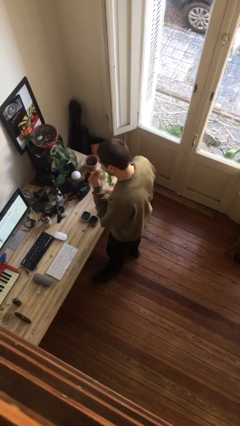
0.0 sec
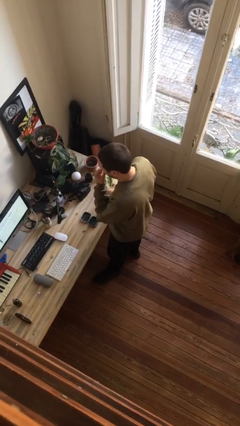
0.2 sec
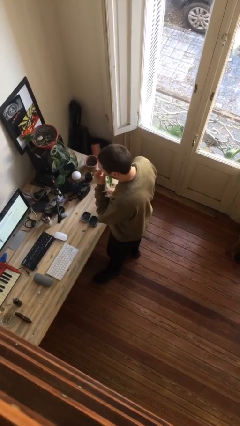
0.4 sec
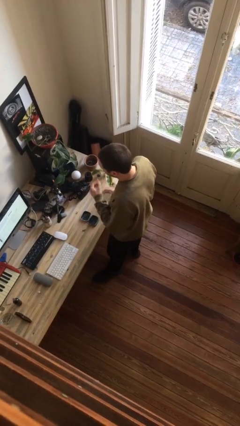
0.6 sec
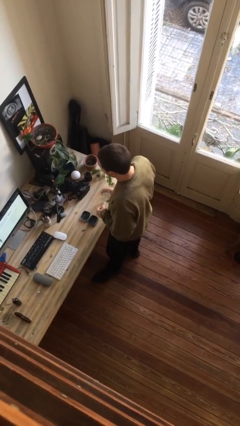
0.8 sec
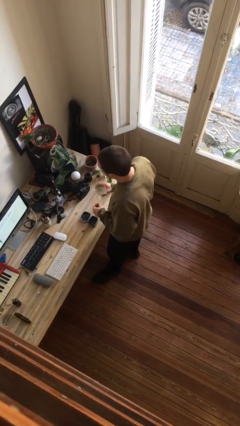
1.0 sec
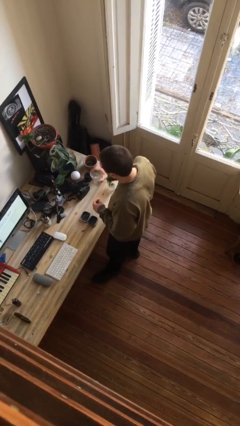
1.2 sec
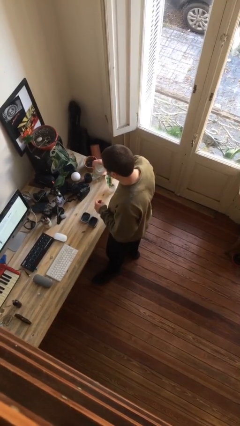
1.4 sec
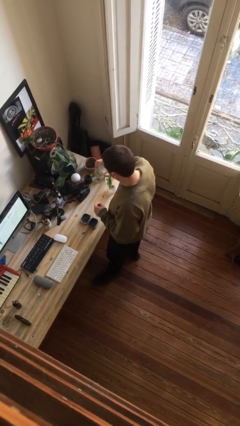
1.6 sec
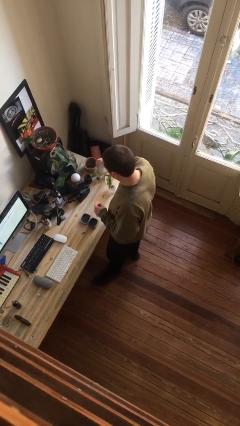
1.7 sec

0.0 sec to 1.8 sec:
person takes medicine pills

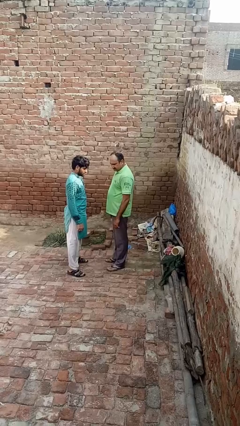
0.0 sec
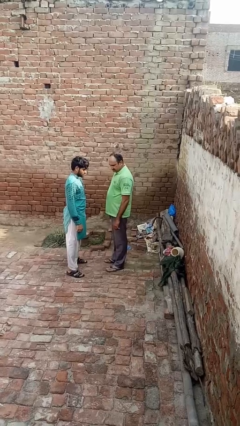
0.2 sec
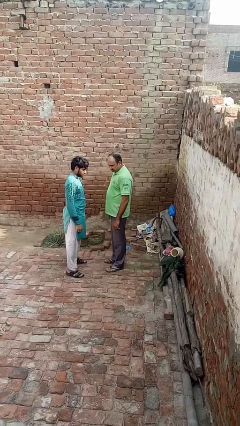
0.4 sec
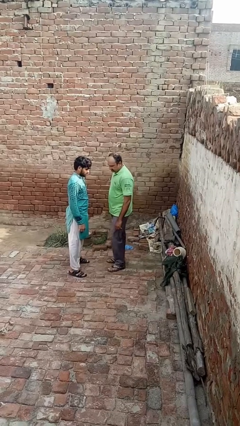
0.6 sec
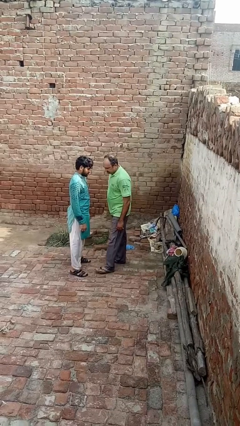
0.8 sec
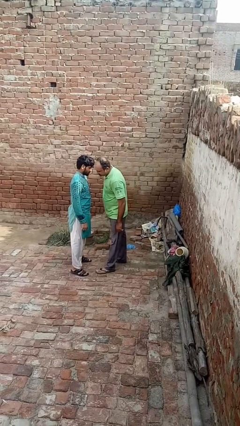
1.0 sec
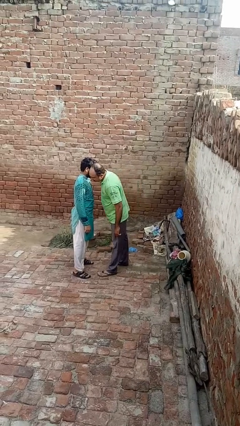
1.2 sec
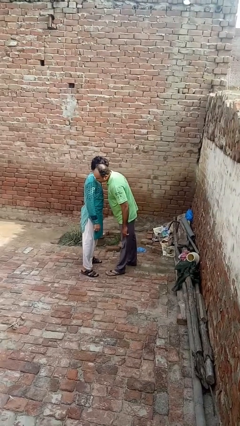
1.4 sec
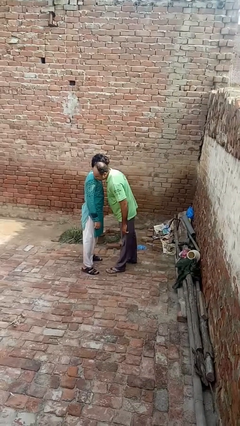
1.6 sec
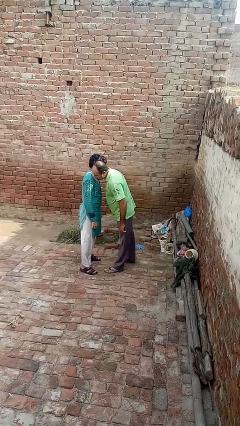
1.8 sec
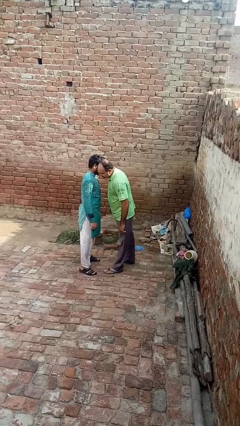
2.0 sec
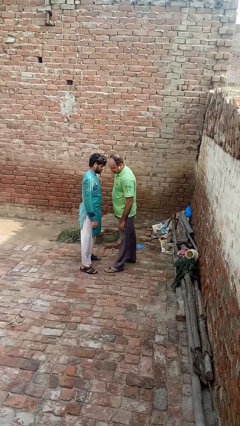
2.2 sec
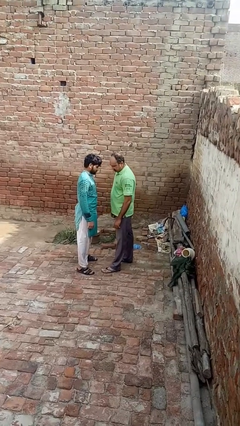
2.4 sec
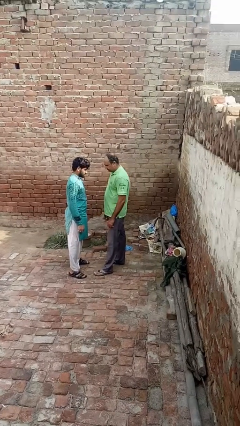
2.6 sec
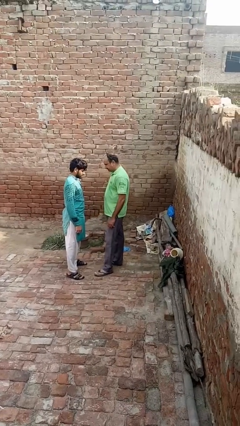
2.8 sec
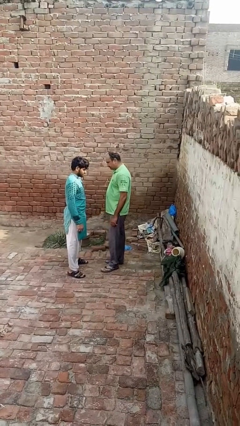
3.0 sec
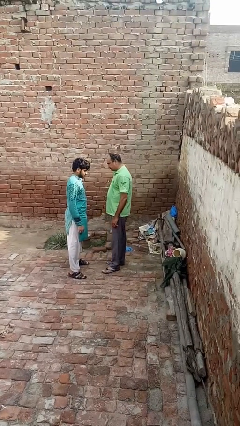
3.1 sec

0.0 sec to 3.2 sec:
person kisses cheek of person

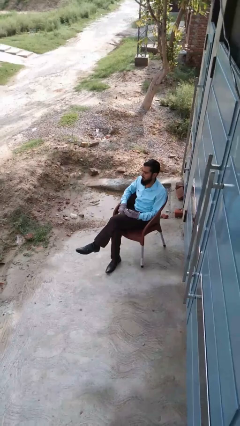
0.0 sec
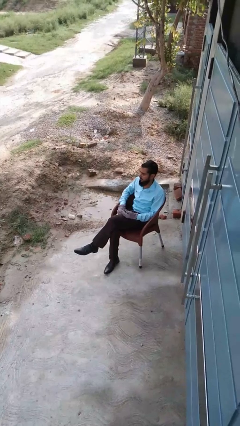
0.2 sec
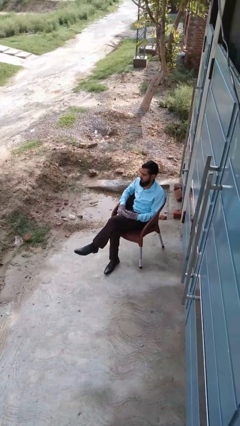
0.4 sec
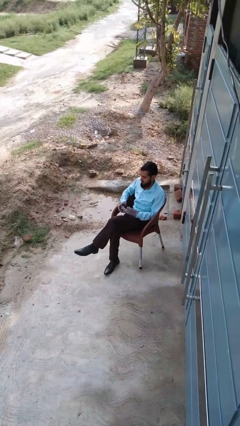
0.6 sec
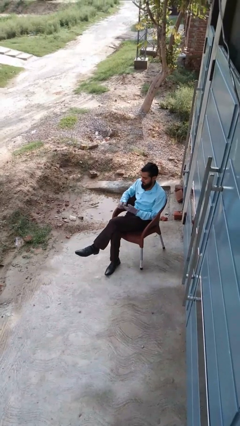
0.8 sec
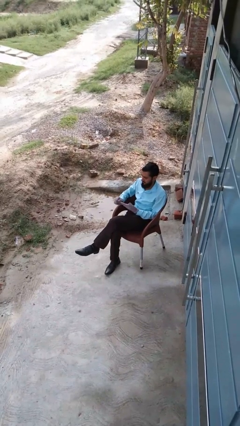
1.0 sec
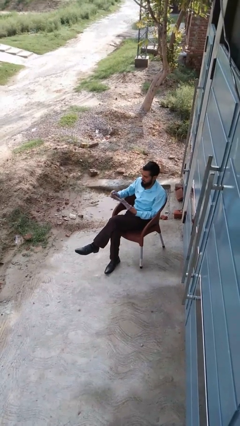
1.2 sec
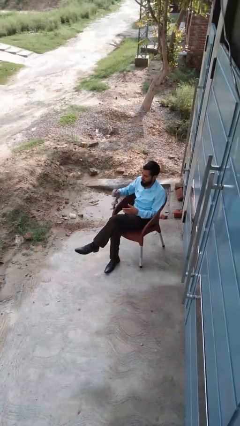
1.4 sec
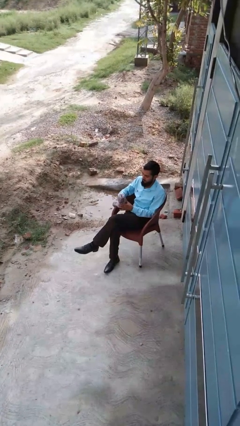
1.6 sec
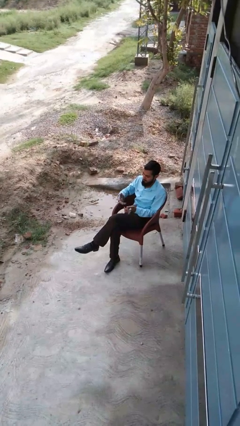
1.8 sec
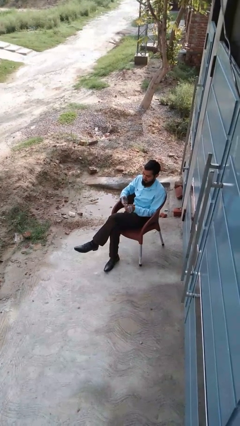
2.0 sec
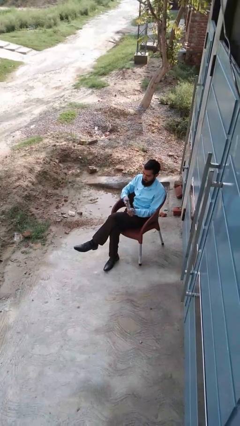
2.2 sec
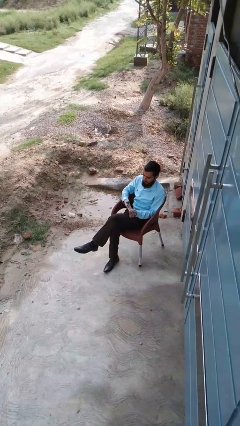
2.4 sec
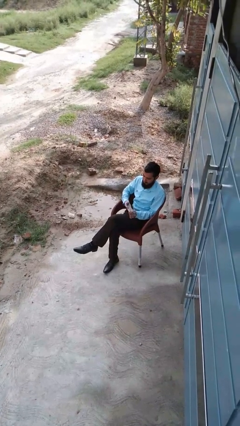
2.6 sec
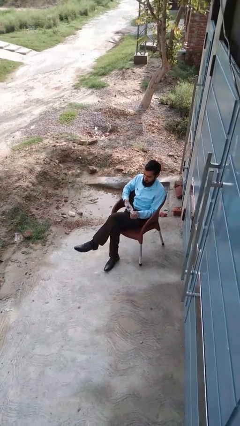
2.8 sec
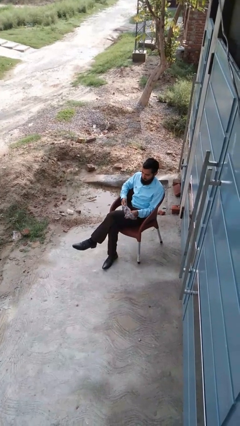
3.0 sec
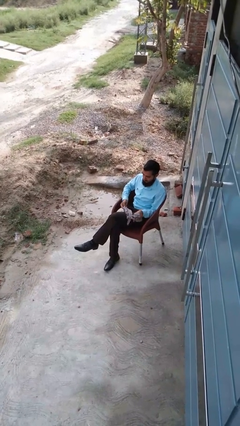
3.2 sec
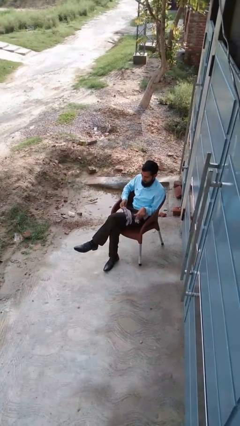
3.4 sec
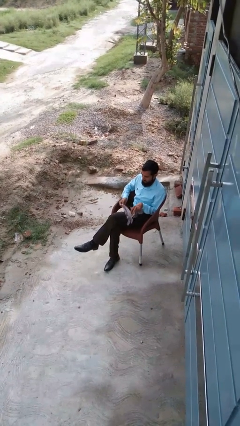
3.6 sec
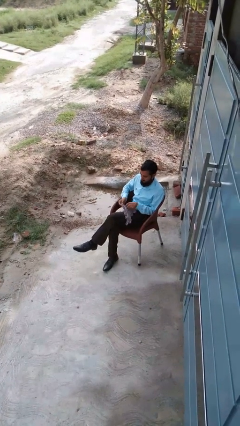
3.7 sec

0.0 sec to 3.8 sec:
person takes off gloves

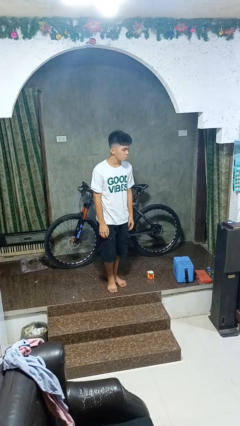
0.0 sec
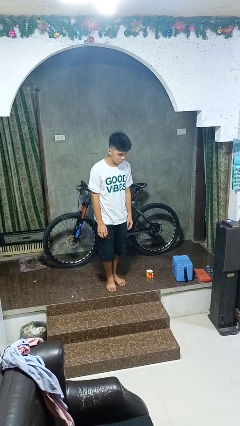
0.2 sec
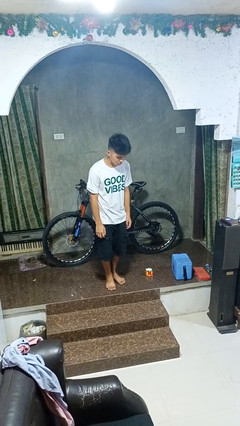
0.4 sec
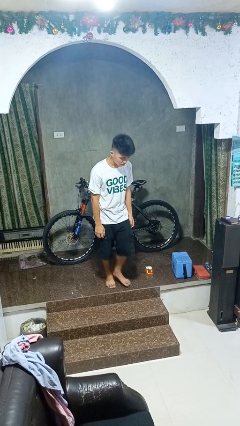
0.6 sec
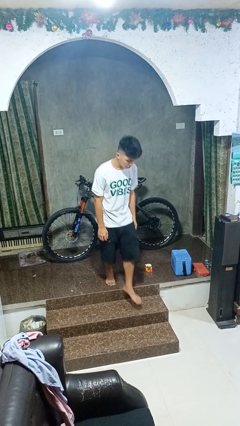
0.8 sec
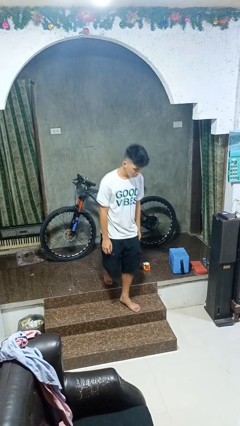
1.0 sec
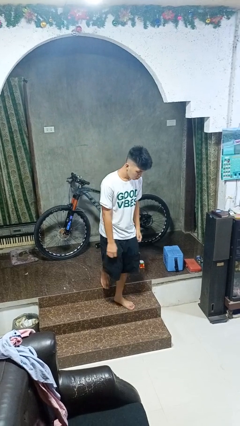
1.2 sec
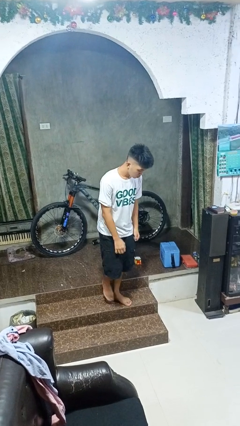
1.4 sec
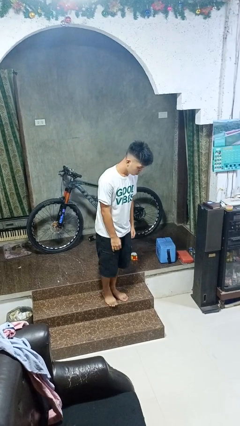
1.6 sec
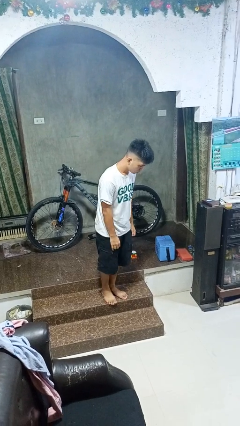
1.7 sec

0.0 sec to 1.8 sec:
person climbs down stairs

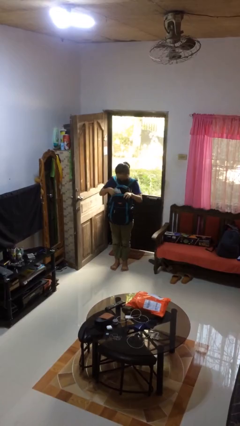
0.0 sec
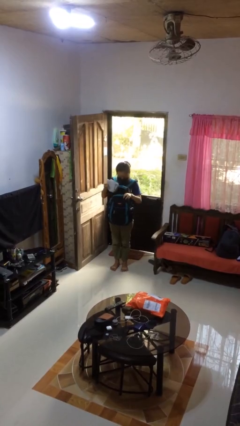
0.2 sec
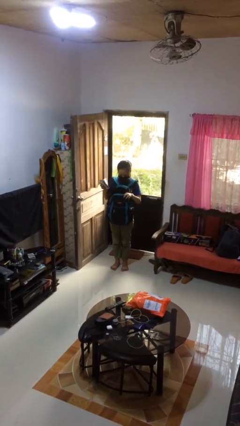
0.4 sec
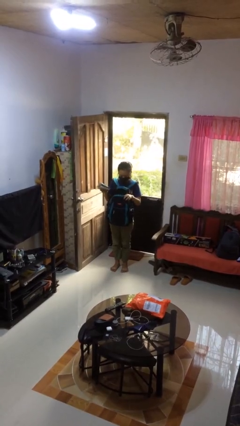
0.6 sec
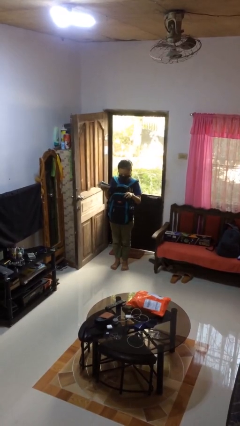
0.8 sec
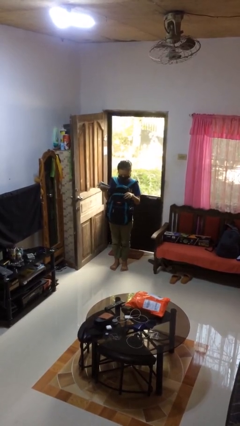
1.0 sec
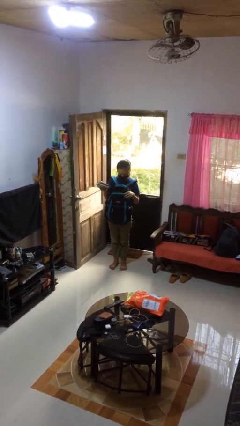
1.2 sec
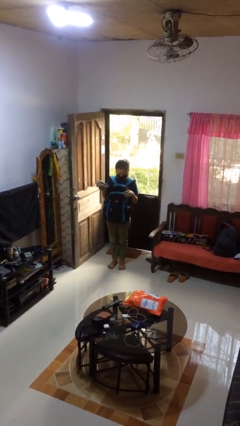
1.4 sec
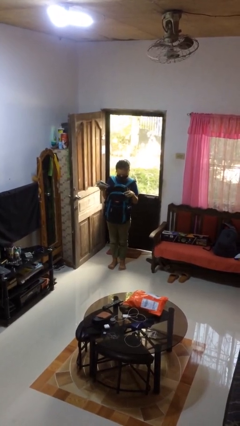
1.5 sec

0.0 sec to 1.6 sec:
person takes object from backpack

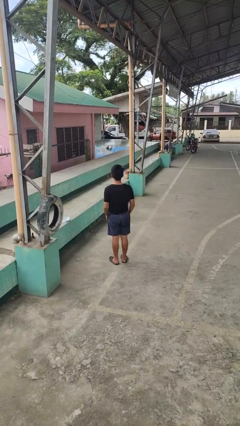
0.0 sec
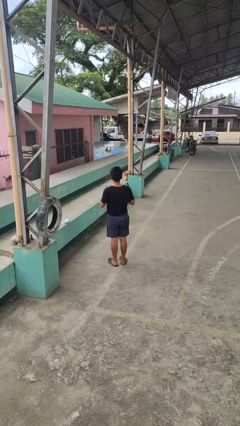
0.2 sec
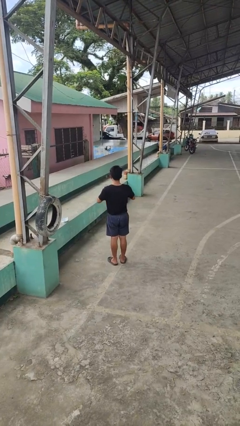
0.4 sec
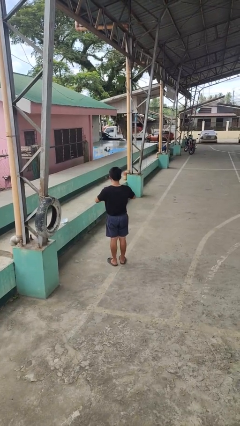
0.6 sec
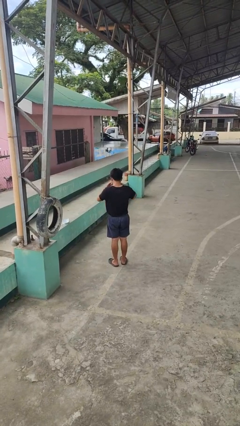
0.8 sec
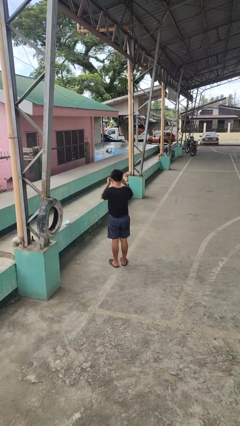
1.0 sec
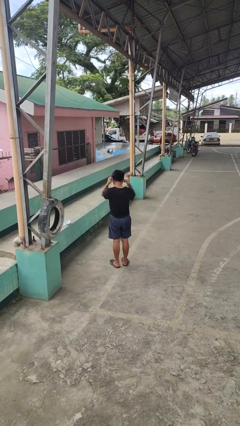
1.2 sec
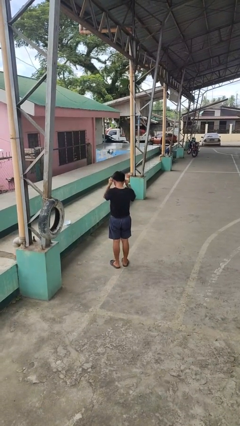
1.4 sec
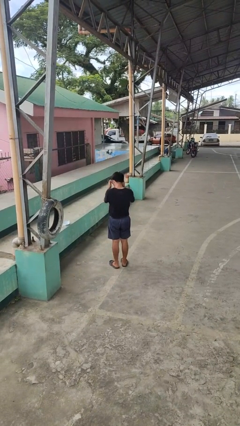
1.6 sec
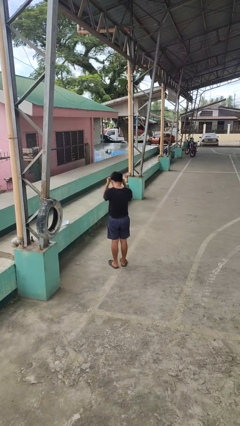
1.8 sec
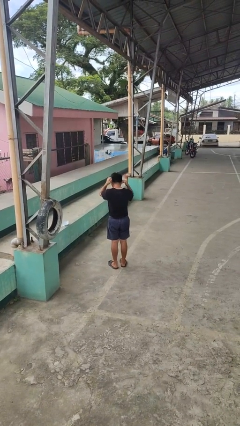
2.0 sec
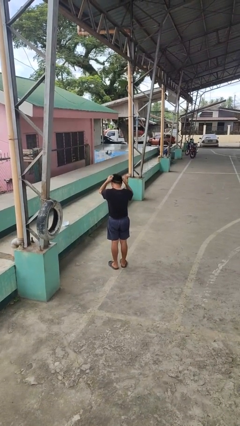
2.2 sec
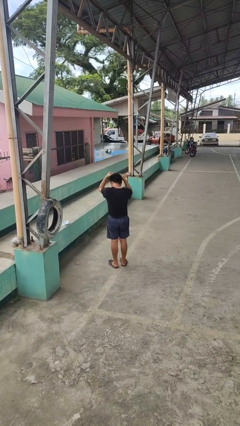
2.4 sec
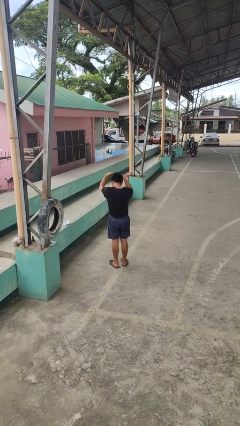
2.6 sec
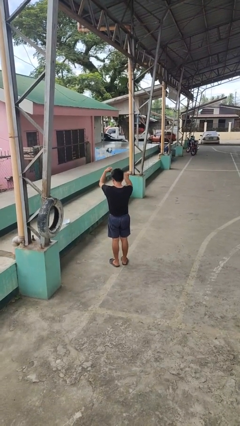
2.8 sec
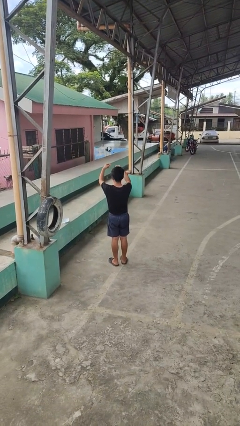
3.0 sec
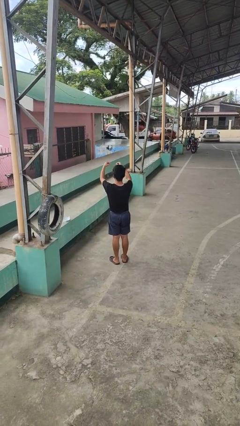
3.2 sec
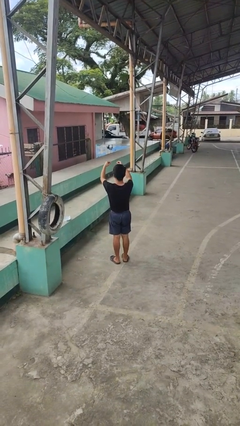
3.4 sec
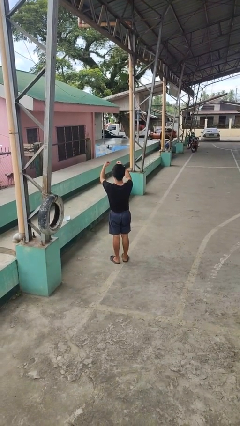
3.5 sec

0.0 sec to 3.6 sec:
person takes off necklace

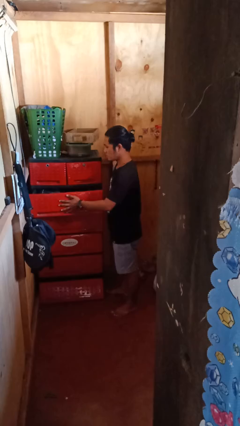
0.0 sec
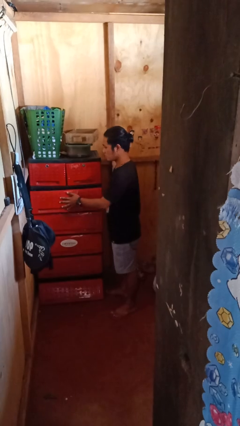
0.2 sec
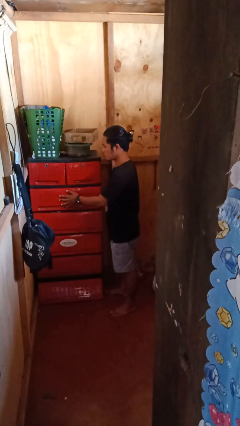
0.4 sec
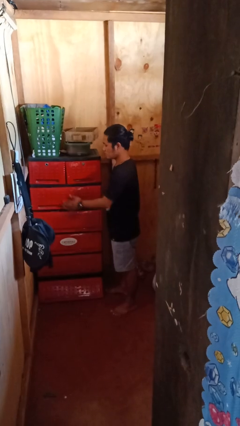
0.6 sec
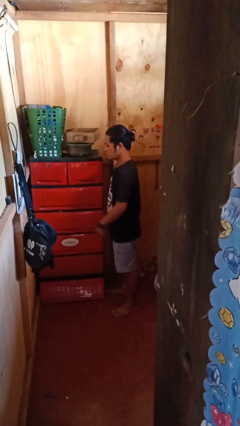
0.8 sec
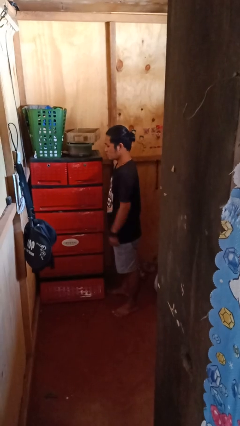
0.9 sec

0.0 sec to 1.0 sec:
person closes dresser drawer

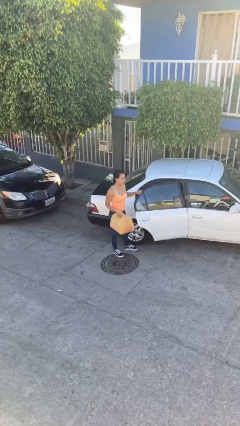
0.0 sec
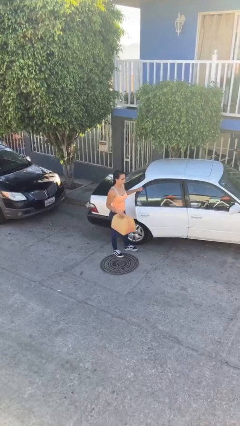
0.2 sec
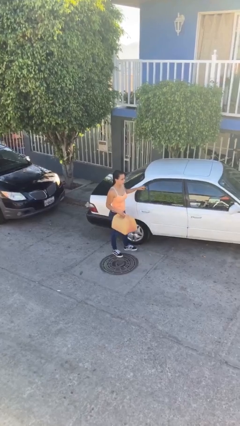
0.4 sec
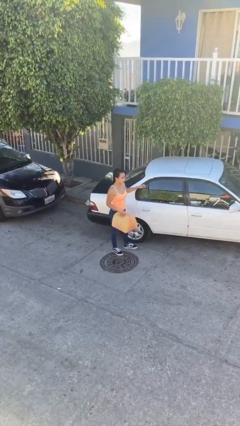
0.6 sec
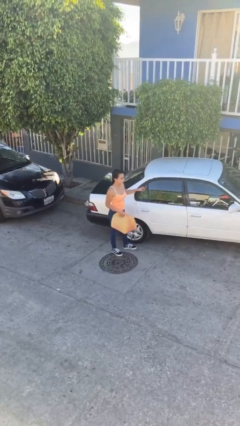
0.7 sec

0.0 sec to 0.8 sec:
person closes car door
